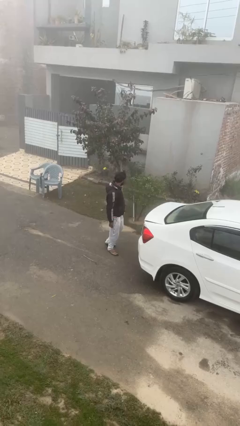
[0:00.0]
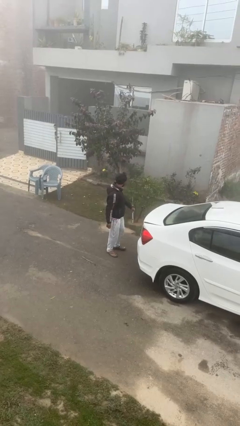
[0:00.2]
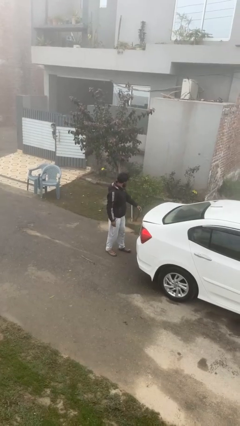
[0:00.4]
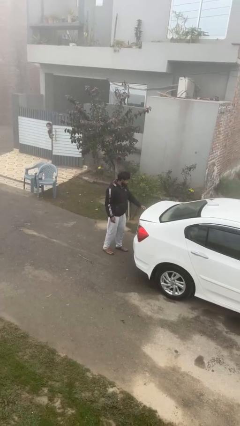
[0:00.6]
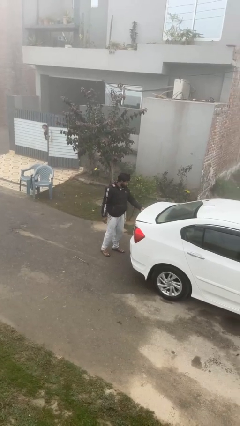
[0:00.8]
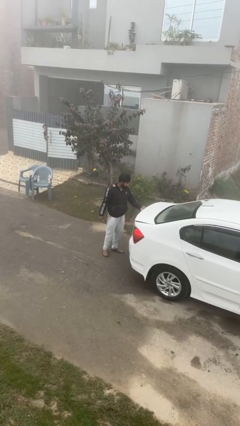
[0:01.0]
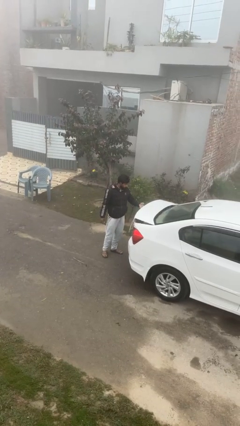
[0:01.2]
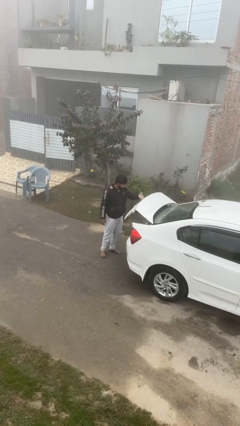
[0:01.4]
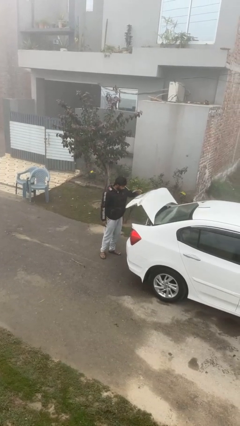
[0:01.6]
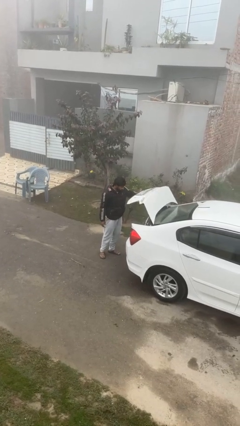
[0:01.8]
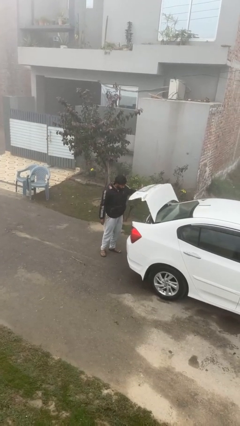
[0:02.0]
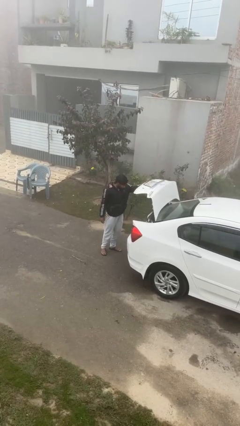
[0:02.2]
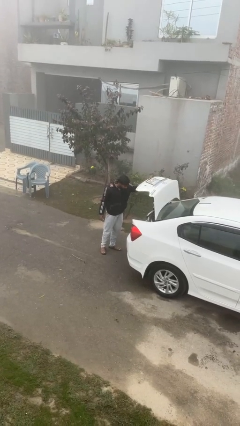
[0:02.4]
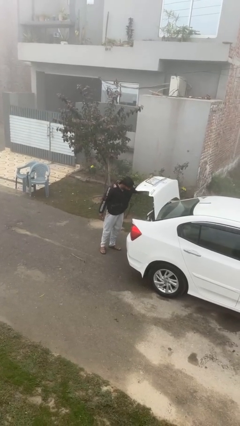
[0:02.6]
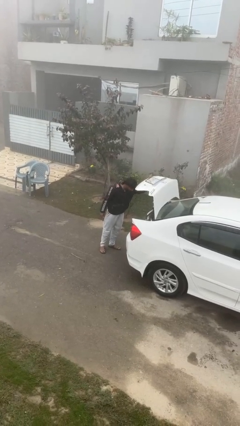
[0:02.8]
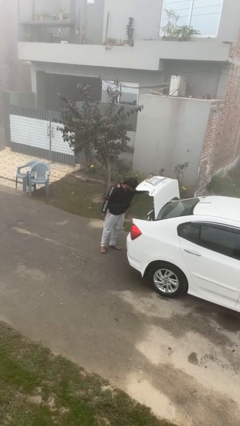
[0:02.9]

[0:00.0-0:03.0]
person opens car trunk

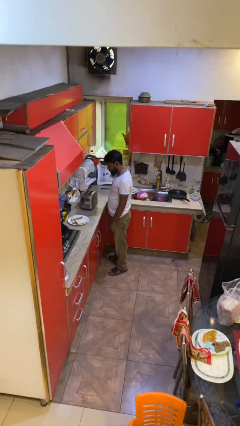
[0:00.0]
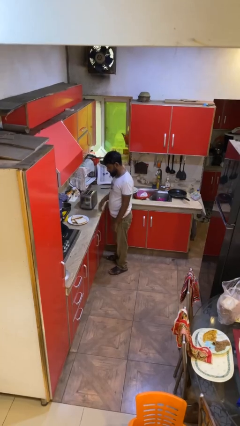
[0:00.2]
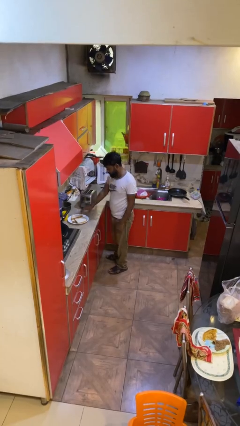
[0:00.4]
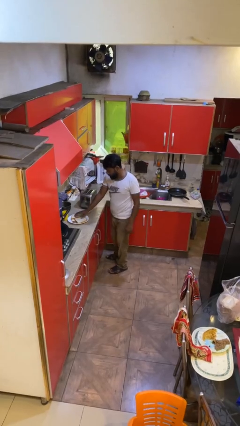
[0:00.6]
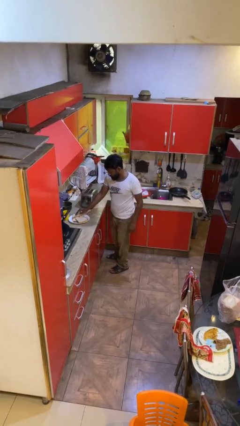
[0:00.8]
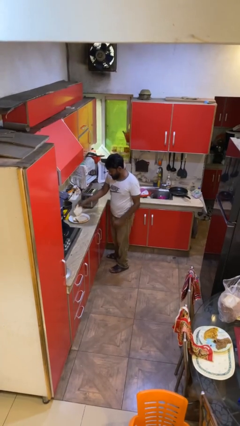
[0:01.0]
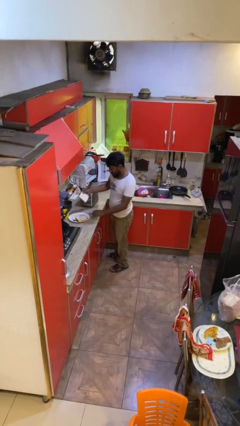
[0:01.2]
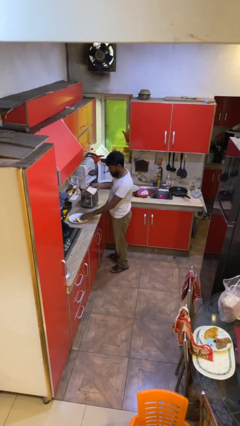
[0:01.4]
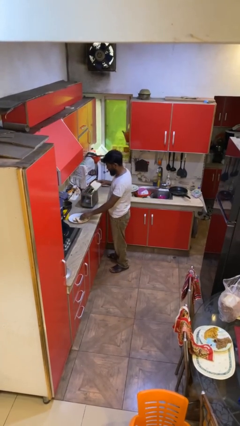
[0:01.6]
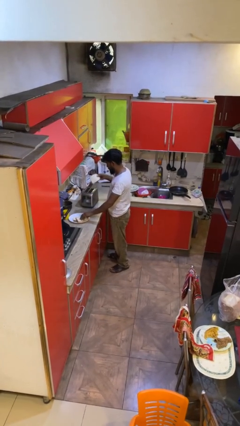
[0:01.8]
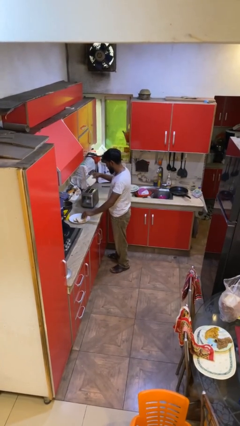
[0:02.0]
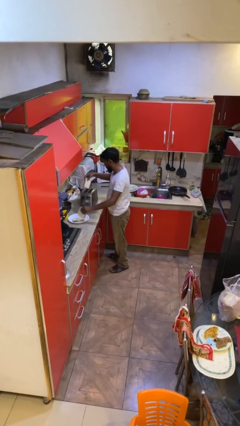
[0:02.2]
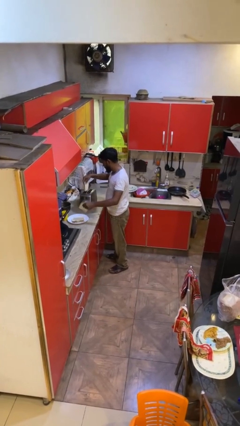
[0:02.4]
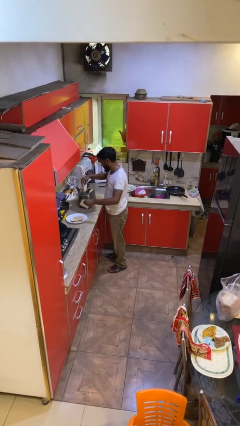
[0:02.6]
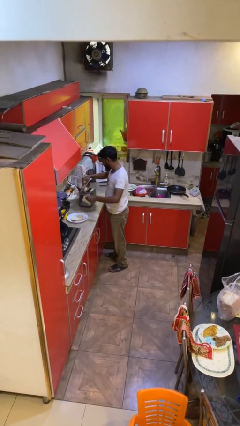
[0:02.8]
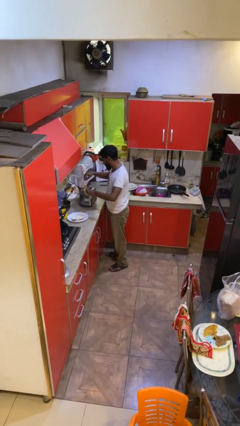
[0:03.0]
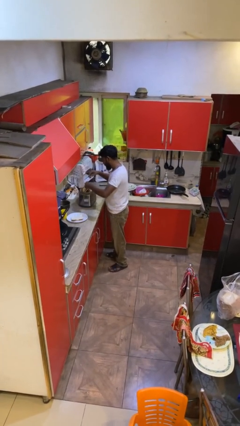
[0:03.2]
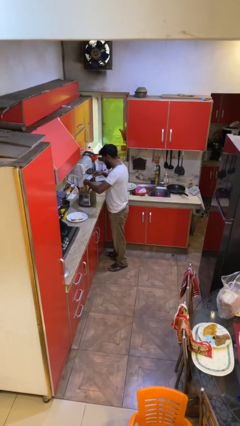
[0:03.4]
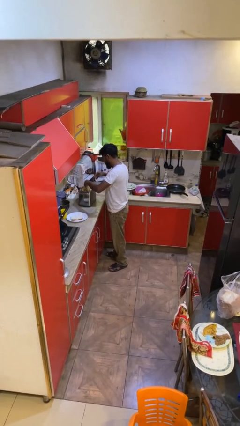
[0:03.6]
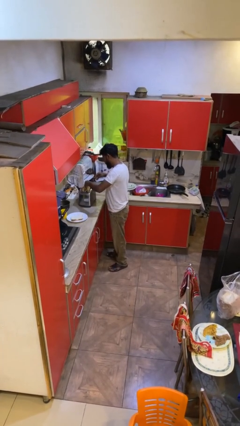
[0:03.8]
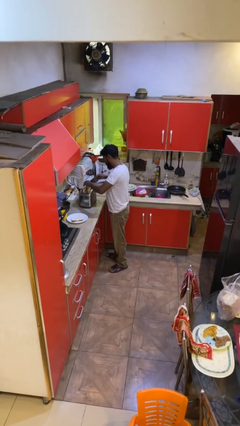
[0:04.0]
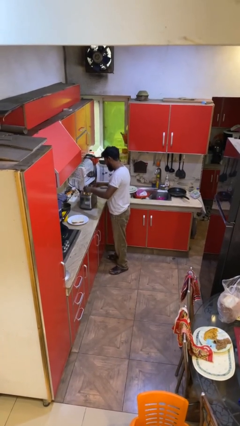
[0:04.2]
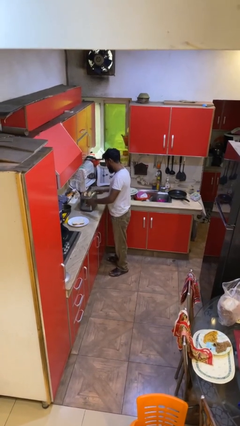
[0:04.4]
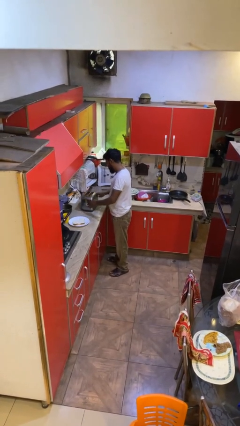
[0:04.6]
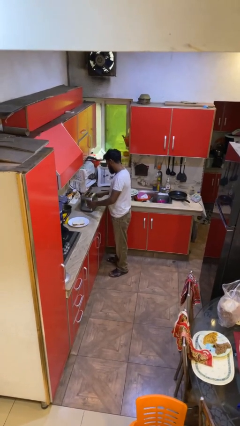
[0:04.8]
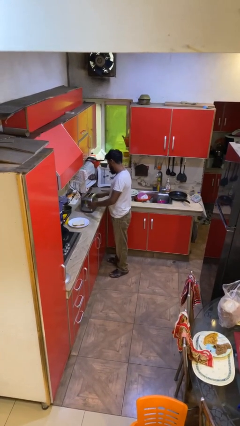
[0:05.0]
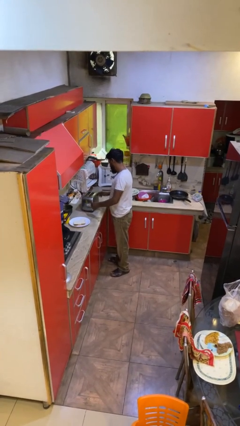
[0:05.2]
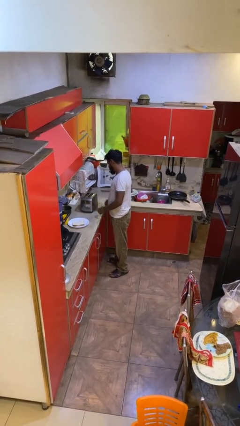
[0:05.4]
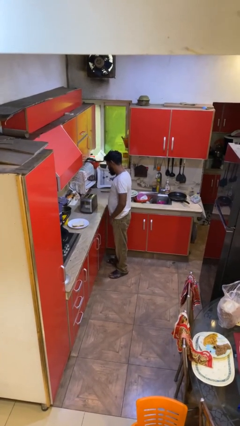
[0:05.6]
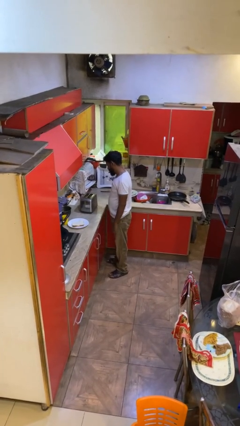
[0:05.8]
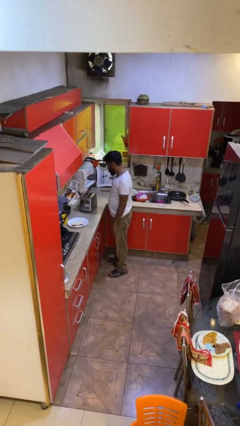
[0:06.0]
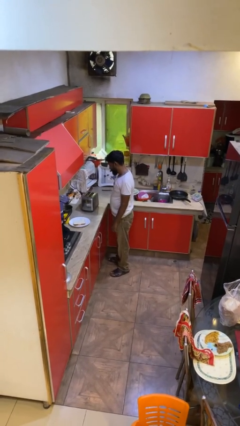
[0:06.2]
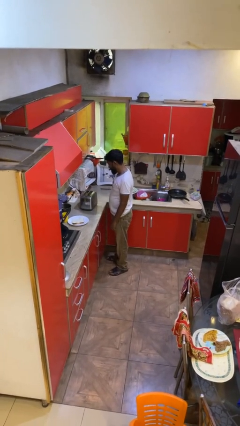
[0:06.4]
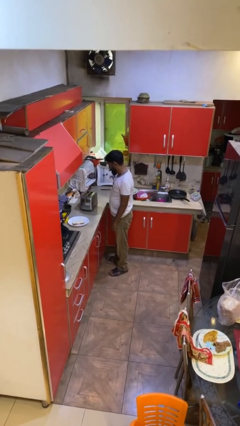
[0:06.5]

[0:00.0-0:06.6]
person puts object into toaster

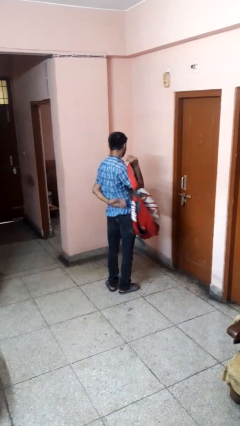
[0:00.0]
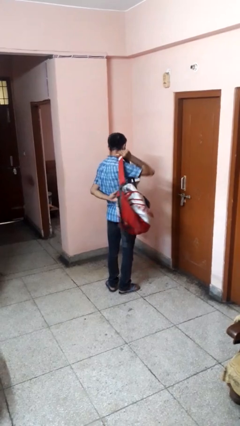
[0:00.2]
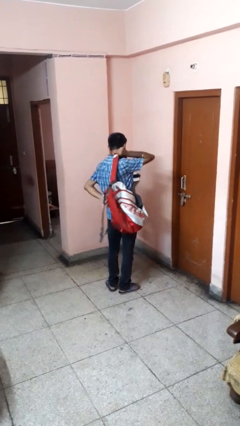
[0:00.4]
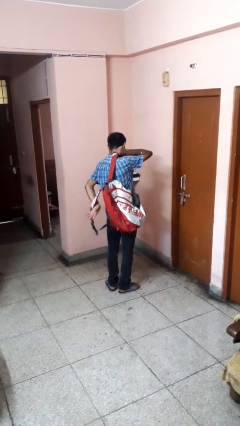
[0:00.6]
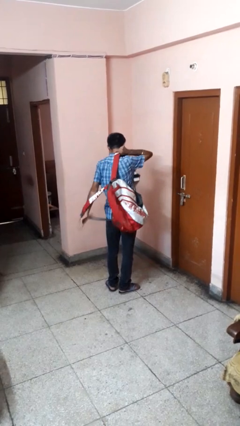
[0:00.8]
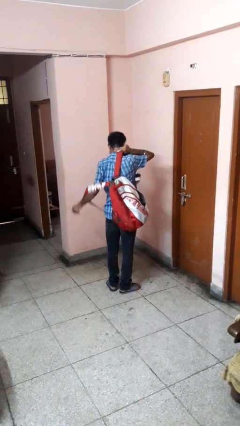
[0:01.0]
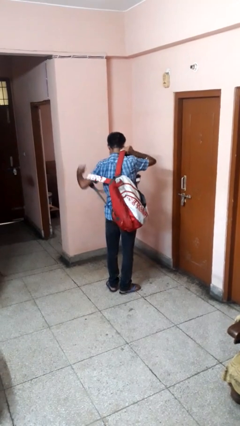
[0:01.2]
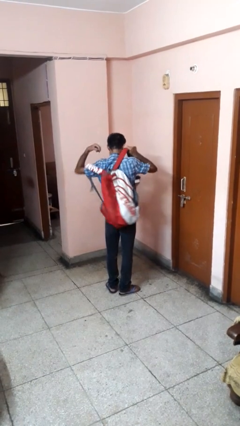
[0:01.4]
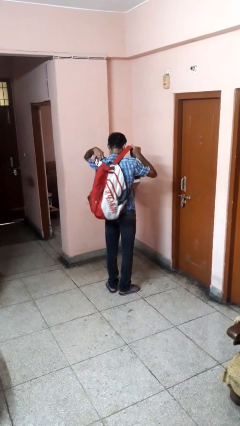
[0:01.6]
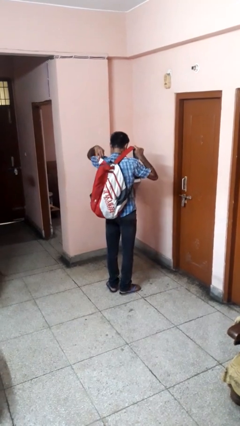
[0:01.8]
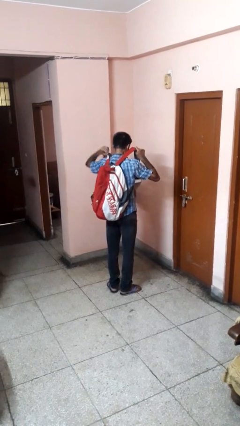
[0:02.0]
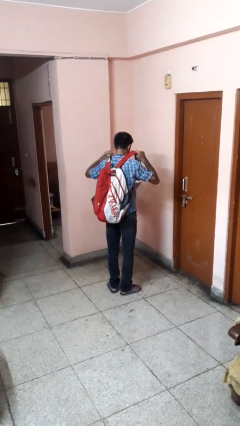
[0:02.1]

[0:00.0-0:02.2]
person puts on backpack

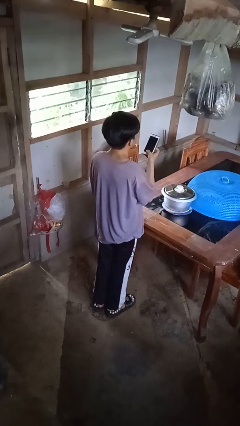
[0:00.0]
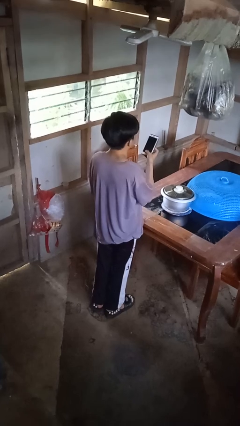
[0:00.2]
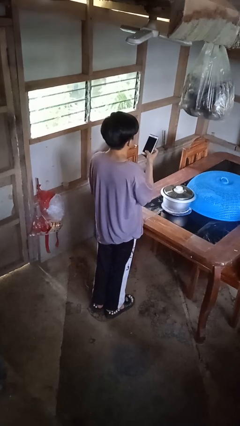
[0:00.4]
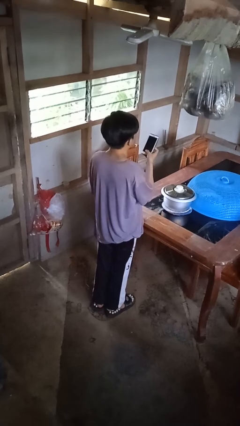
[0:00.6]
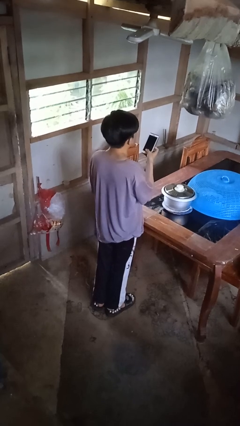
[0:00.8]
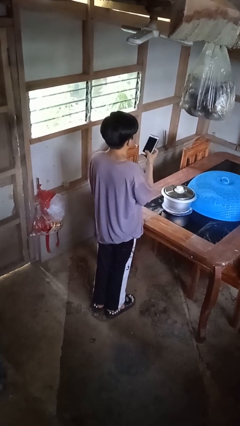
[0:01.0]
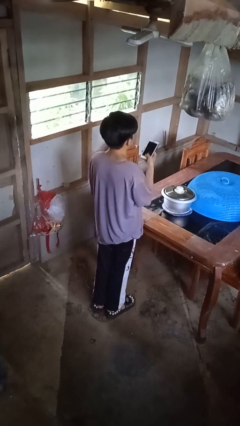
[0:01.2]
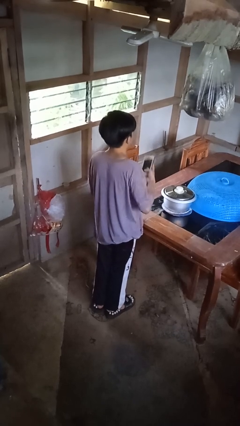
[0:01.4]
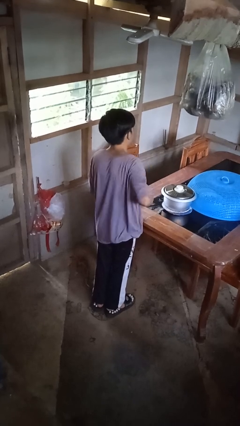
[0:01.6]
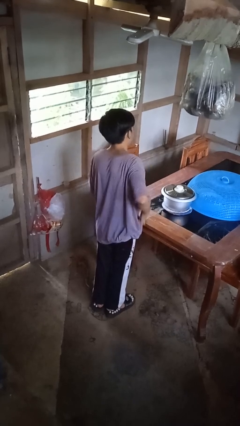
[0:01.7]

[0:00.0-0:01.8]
person puts phone into pocket

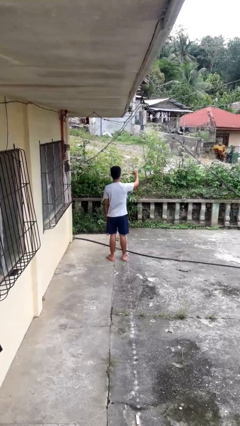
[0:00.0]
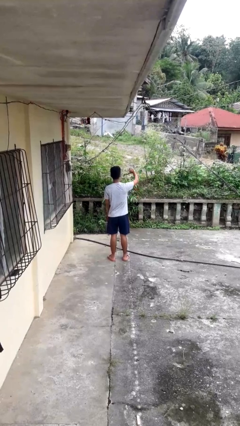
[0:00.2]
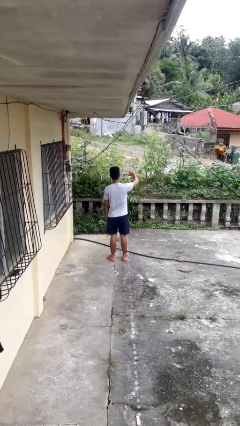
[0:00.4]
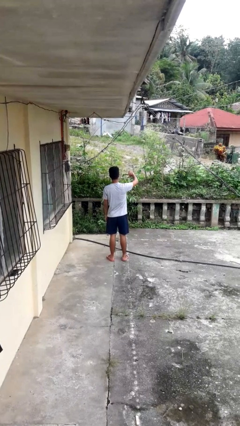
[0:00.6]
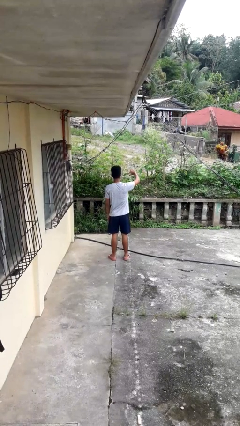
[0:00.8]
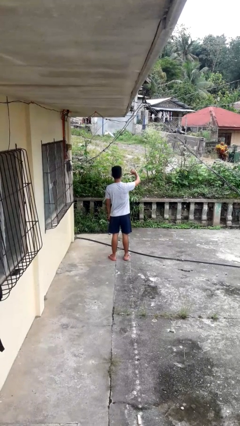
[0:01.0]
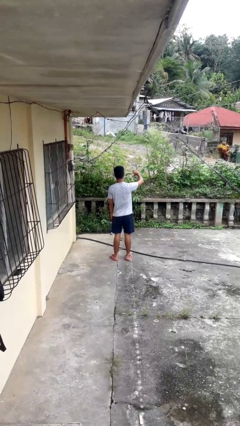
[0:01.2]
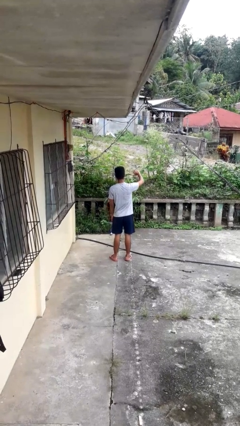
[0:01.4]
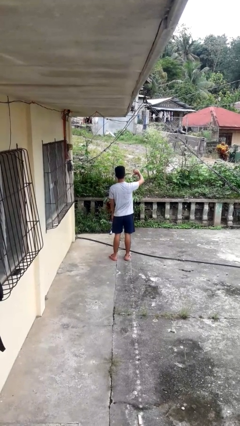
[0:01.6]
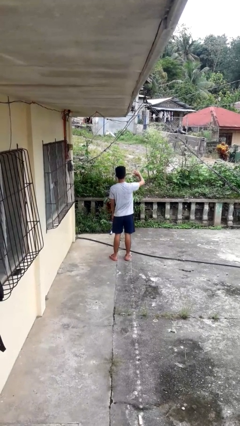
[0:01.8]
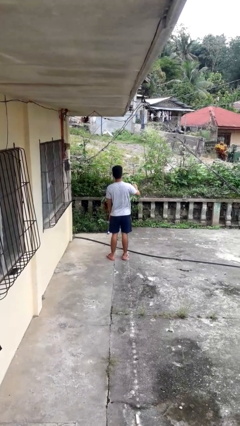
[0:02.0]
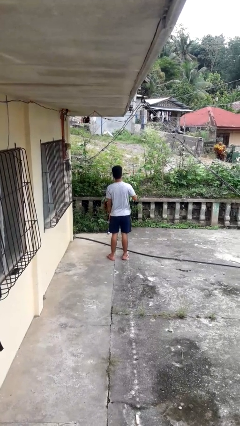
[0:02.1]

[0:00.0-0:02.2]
person gestures thumbs down

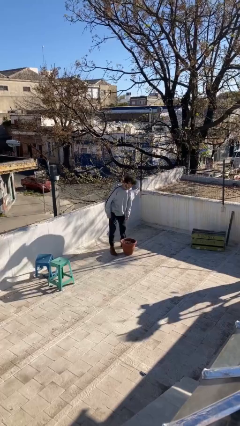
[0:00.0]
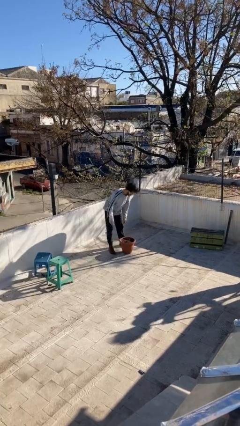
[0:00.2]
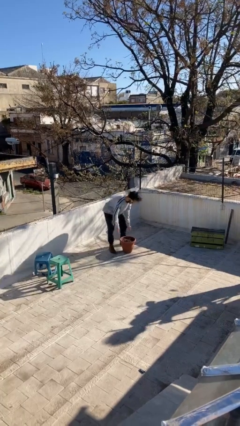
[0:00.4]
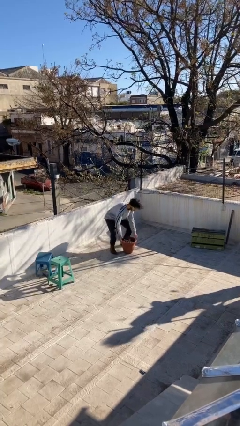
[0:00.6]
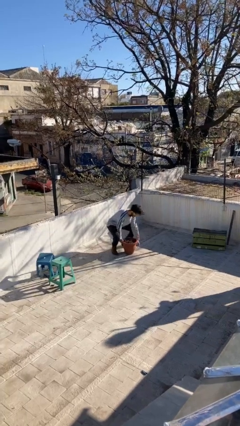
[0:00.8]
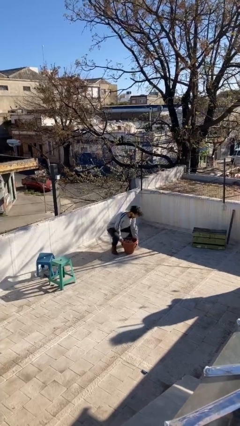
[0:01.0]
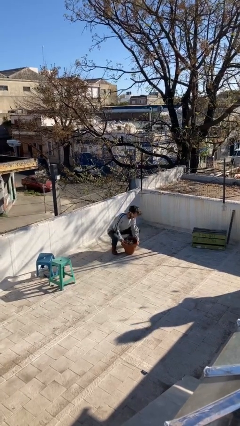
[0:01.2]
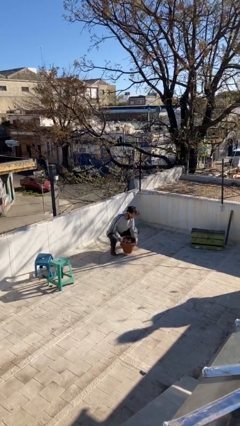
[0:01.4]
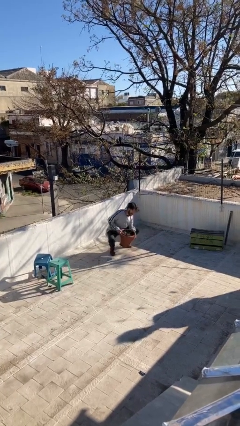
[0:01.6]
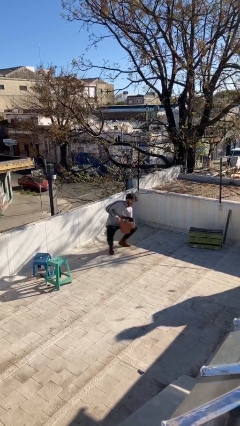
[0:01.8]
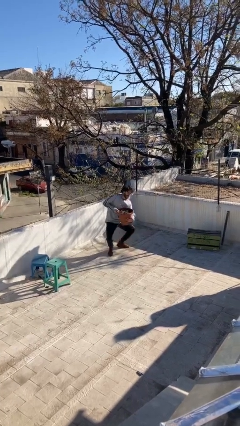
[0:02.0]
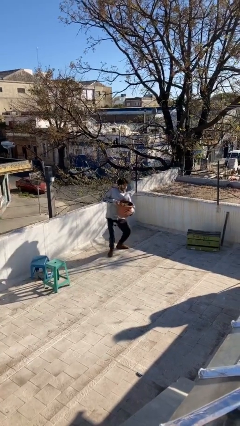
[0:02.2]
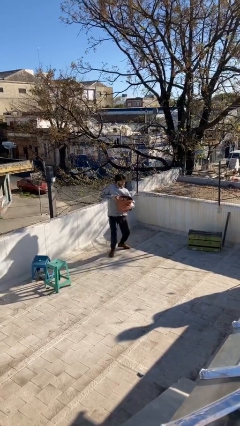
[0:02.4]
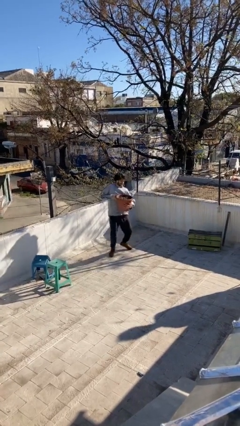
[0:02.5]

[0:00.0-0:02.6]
person picks up object from floor
